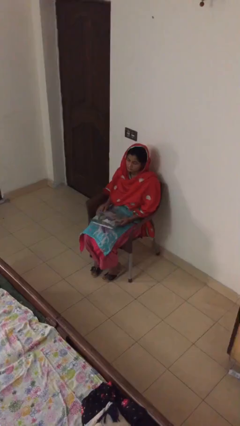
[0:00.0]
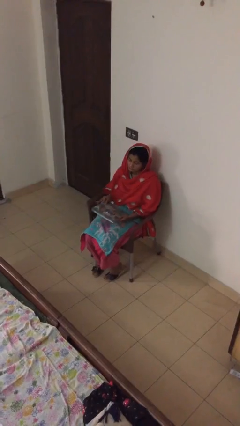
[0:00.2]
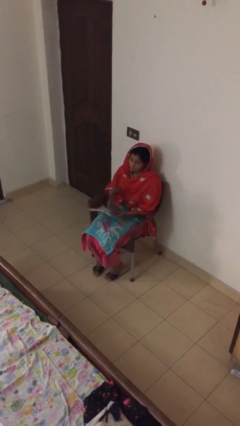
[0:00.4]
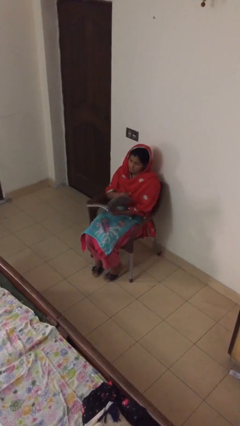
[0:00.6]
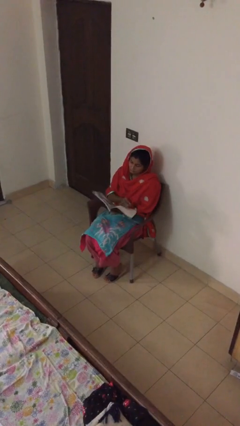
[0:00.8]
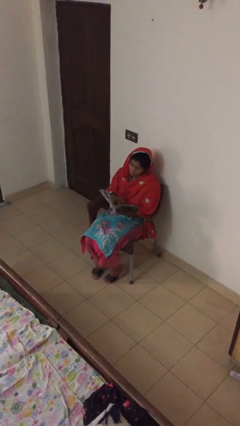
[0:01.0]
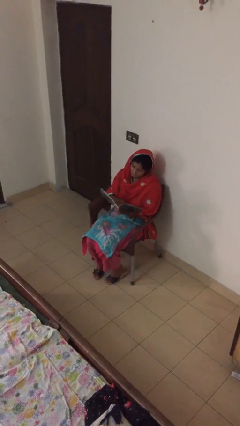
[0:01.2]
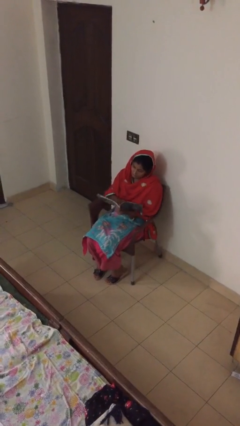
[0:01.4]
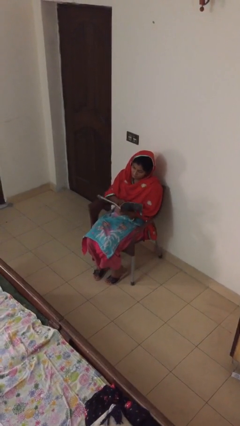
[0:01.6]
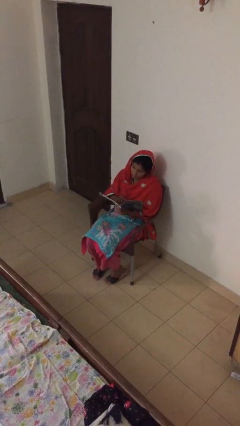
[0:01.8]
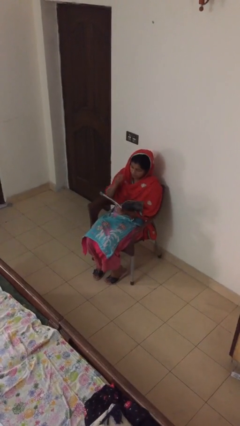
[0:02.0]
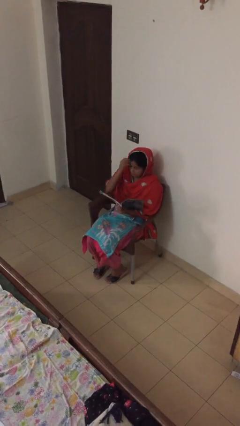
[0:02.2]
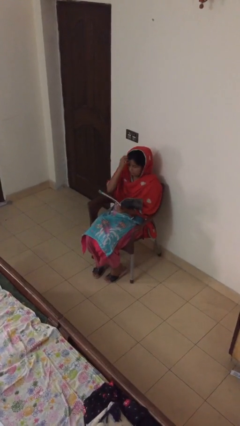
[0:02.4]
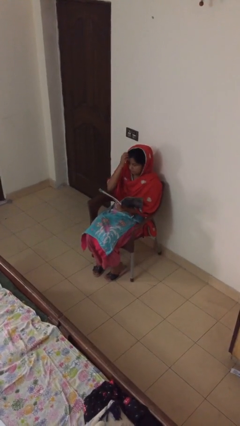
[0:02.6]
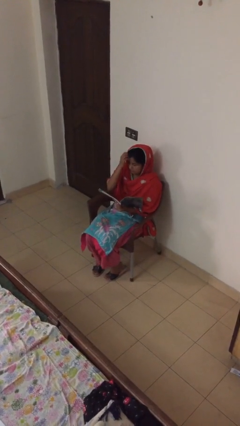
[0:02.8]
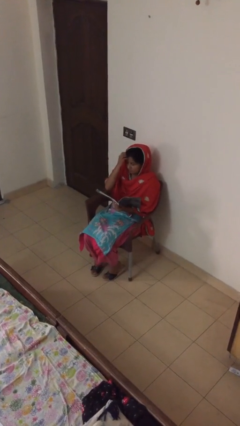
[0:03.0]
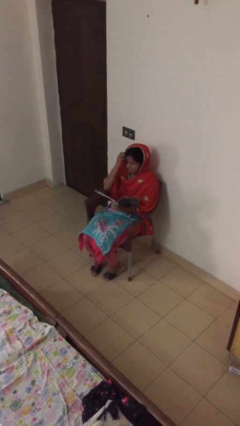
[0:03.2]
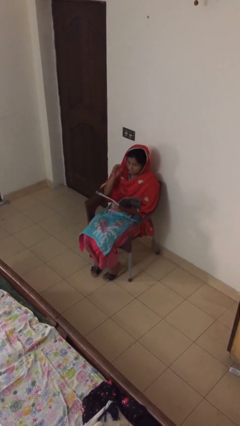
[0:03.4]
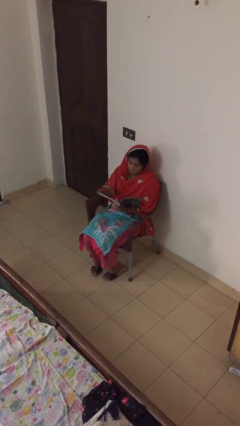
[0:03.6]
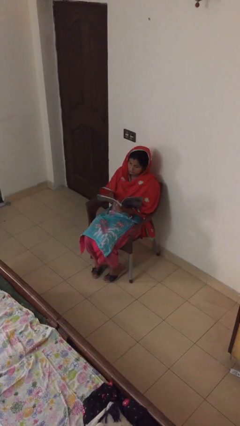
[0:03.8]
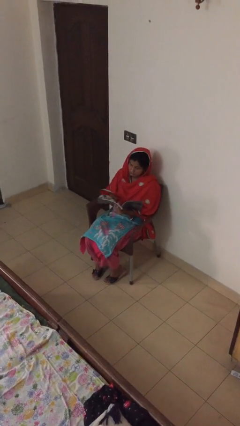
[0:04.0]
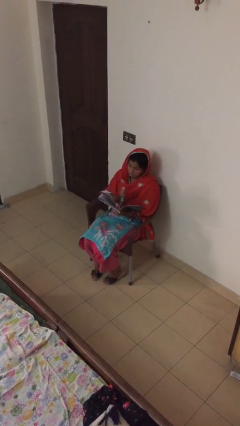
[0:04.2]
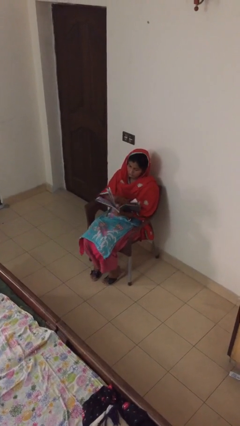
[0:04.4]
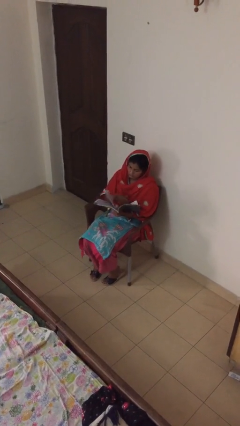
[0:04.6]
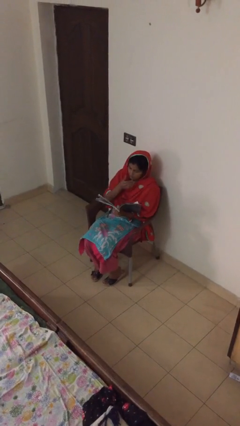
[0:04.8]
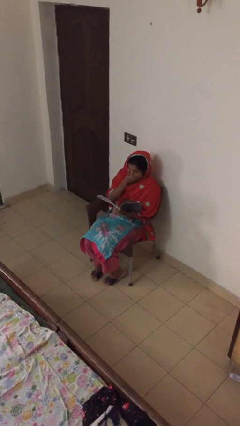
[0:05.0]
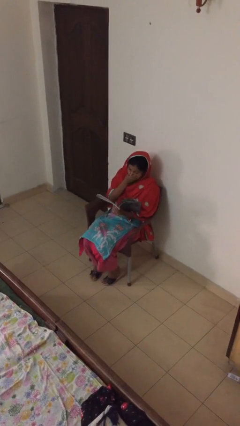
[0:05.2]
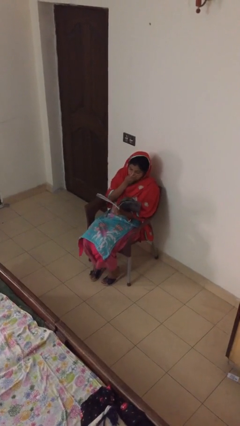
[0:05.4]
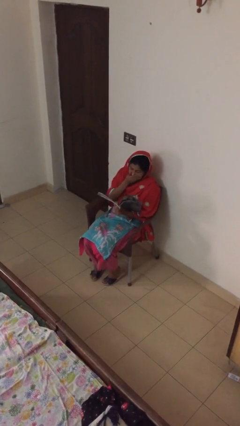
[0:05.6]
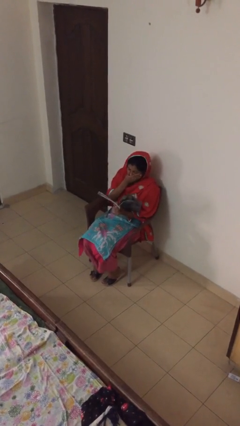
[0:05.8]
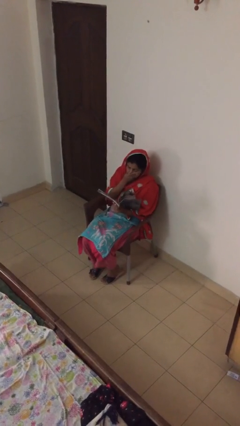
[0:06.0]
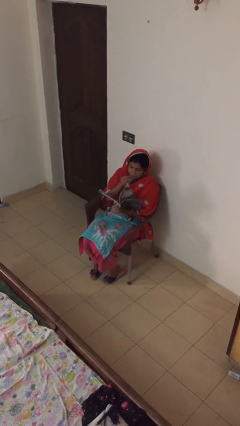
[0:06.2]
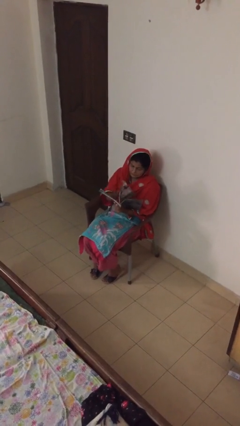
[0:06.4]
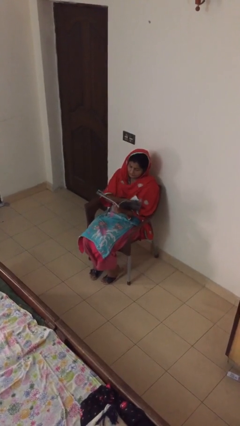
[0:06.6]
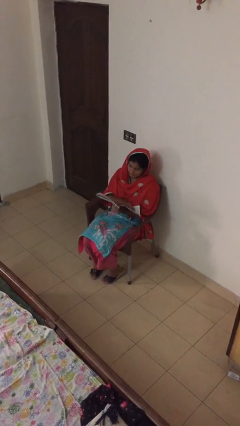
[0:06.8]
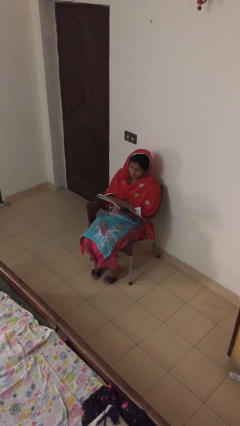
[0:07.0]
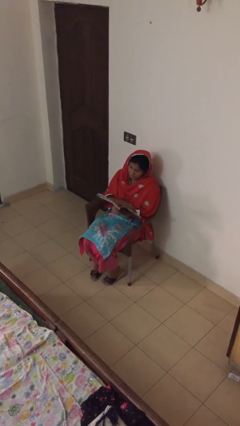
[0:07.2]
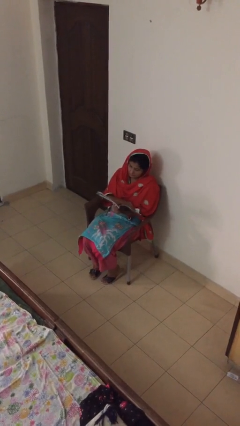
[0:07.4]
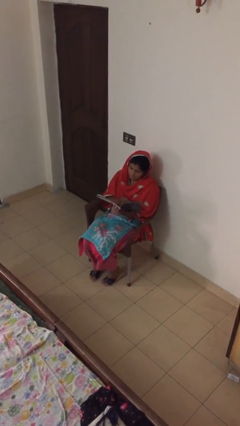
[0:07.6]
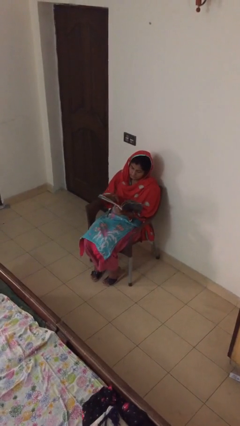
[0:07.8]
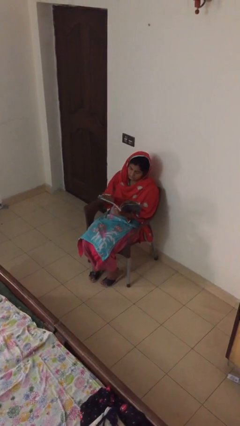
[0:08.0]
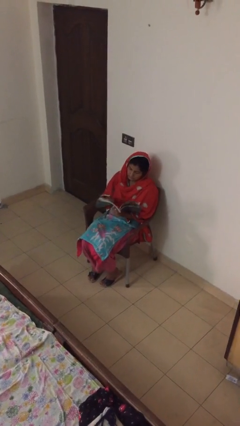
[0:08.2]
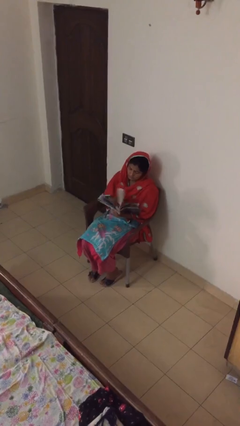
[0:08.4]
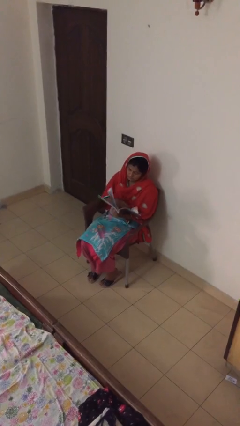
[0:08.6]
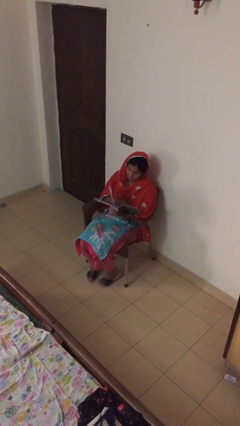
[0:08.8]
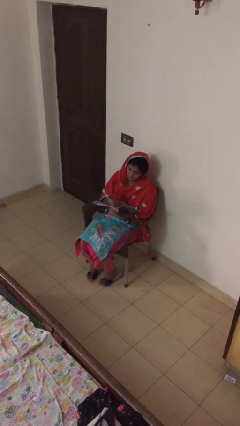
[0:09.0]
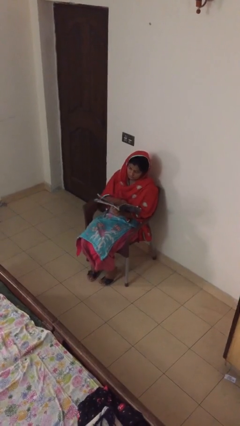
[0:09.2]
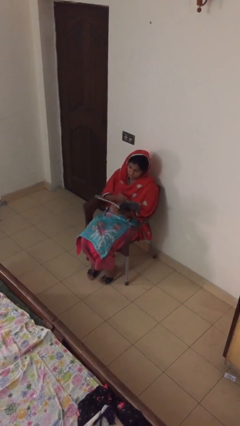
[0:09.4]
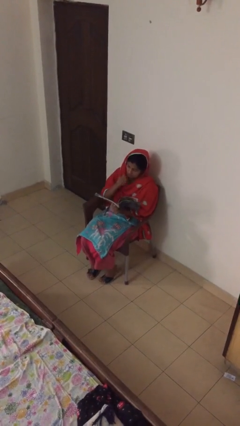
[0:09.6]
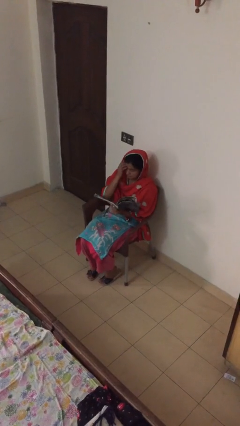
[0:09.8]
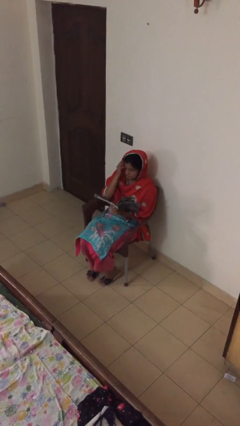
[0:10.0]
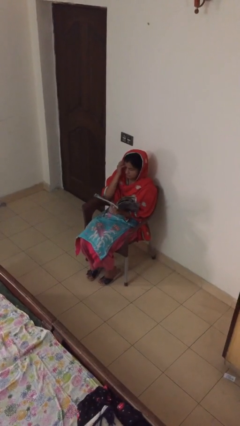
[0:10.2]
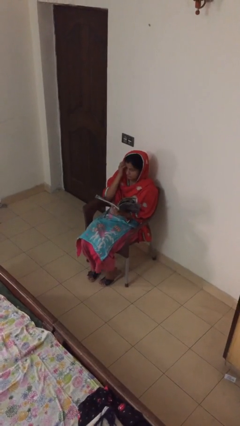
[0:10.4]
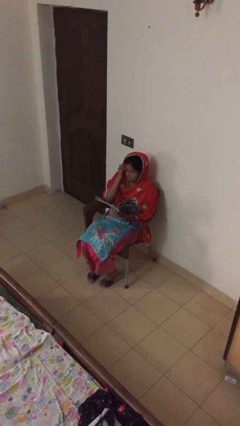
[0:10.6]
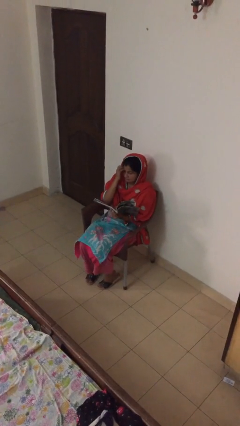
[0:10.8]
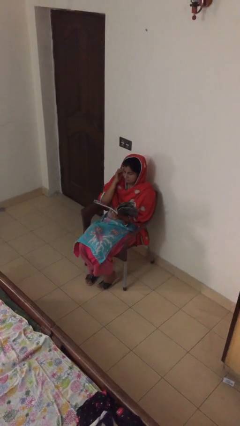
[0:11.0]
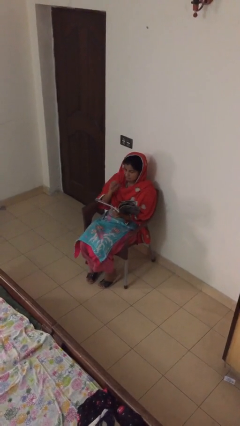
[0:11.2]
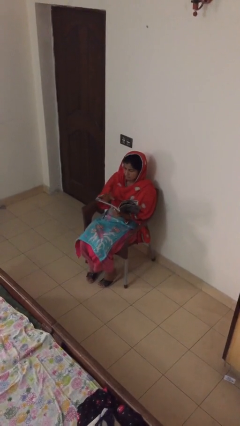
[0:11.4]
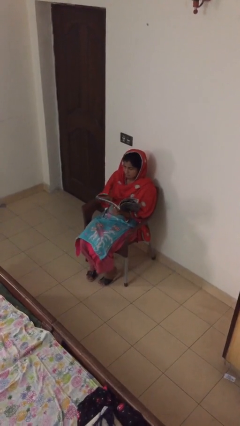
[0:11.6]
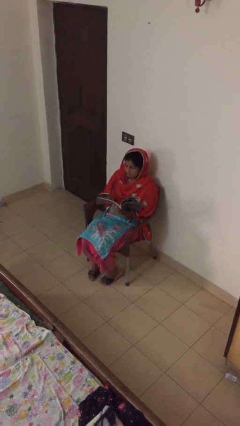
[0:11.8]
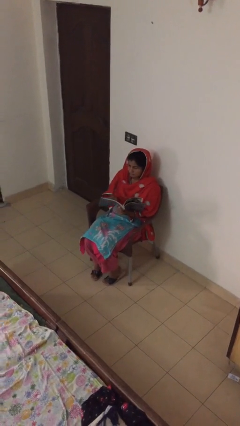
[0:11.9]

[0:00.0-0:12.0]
person reads document

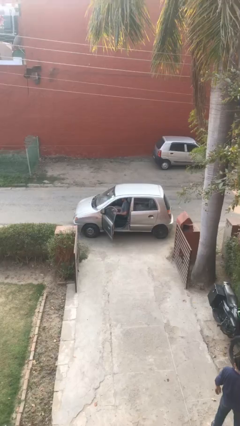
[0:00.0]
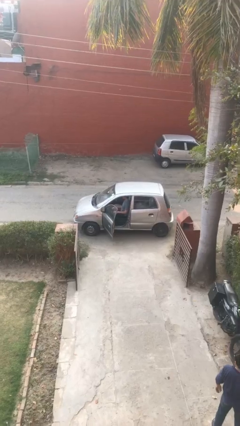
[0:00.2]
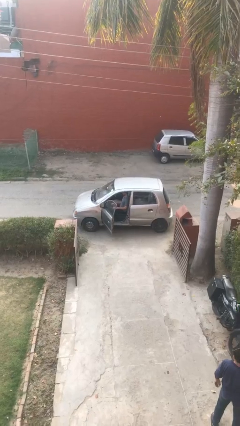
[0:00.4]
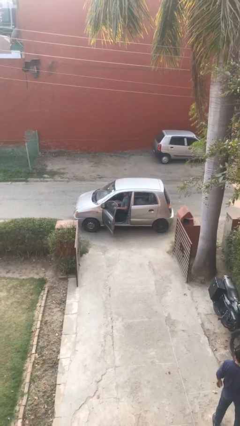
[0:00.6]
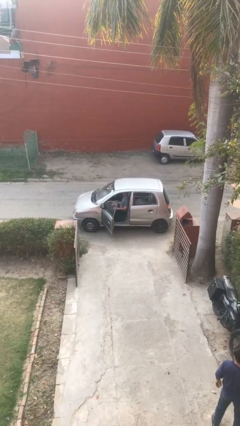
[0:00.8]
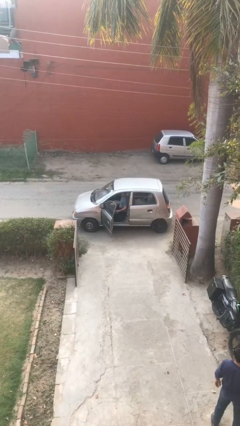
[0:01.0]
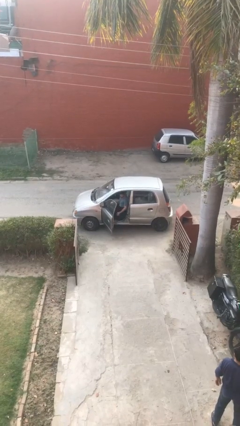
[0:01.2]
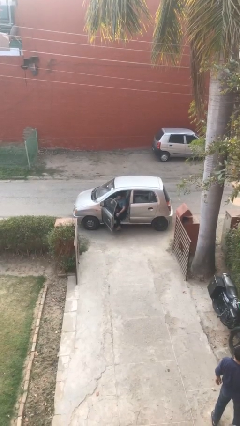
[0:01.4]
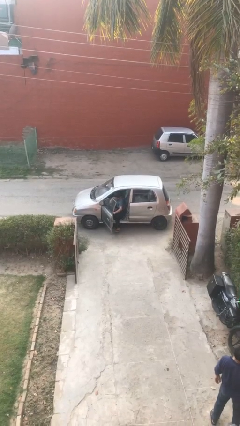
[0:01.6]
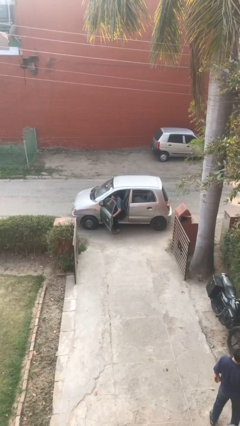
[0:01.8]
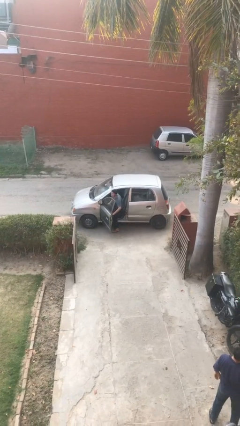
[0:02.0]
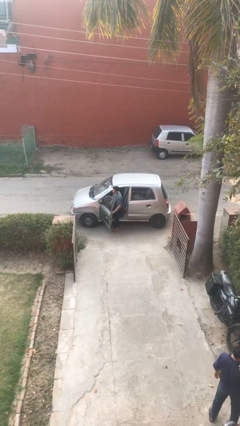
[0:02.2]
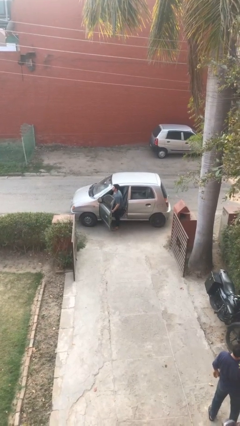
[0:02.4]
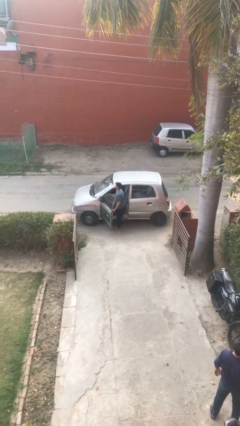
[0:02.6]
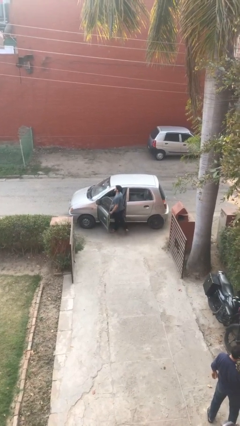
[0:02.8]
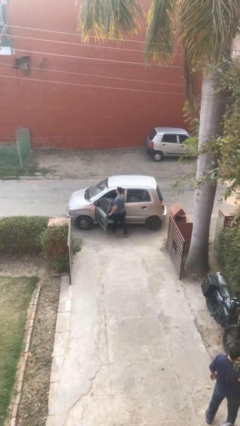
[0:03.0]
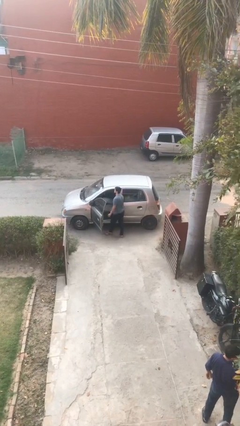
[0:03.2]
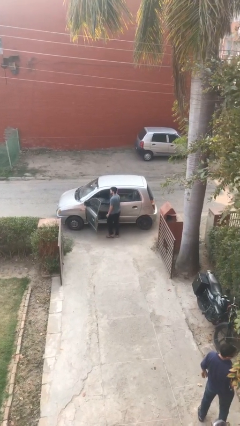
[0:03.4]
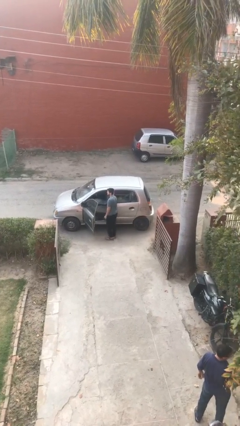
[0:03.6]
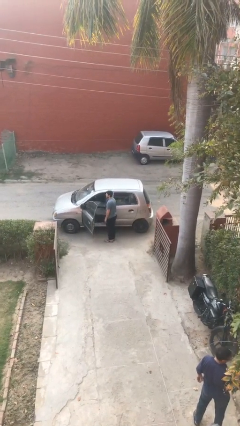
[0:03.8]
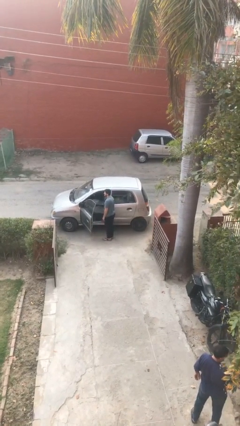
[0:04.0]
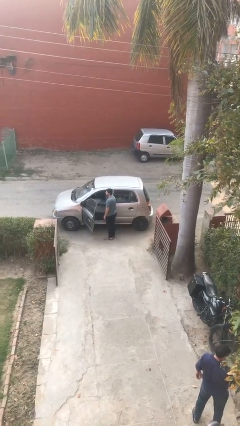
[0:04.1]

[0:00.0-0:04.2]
person exits car

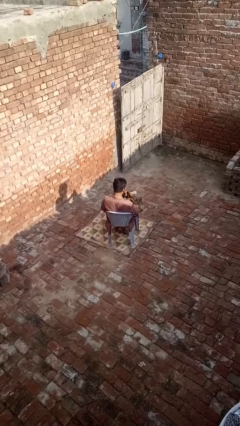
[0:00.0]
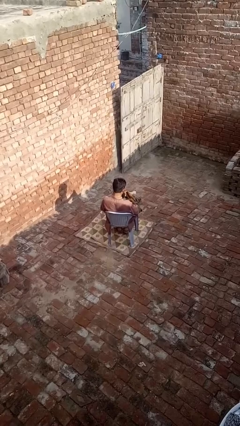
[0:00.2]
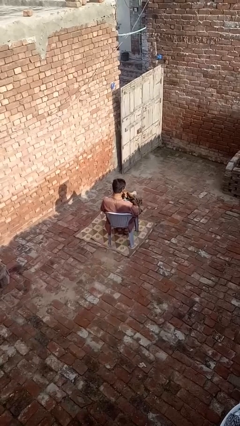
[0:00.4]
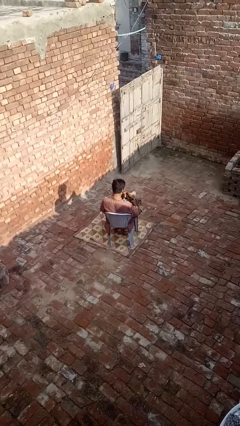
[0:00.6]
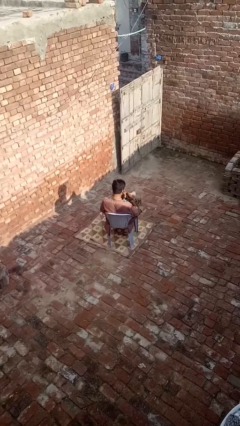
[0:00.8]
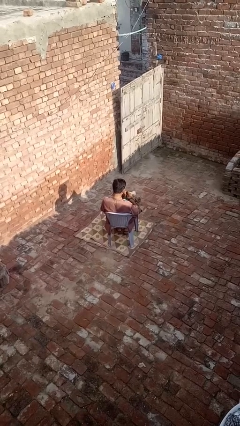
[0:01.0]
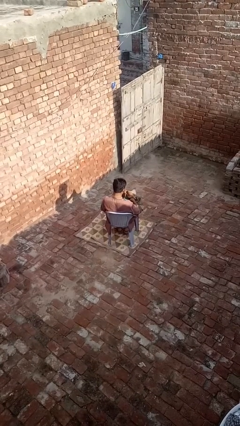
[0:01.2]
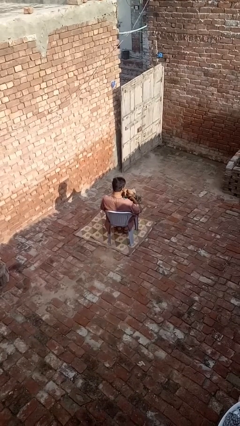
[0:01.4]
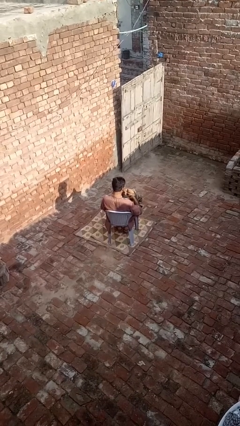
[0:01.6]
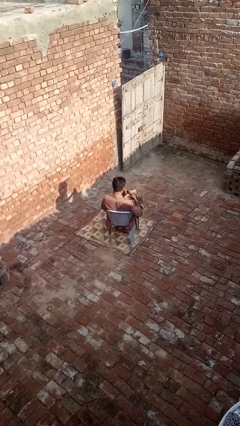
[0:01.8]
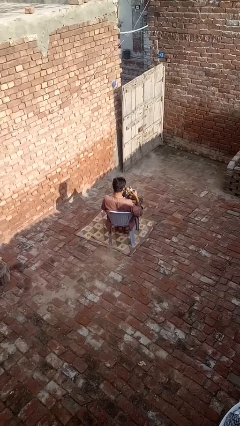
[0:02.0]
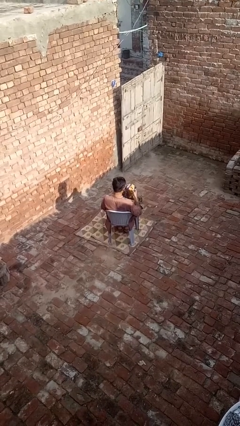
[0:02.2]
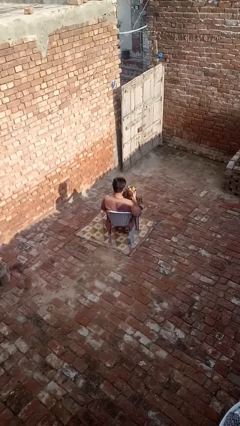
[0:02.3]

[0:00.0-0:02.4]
person takes object from purse
